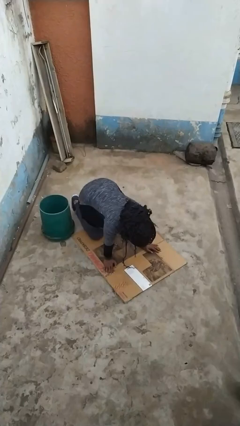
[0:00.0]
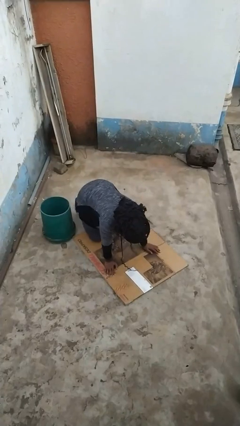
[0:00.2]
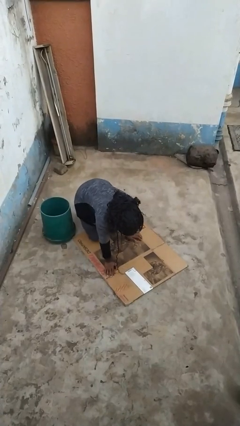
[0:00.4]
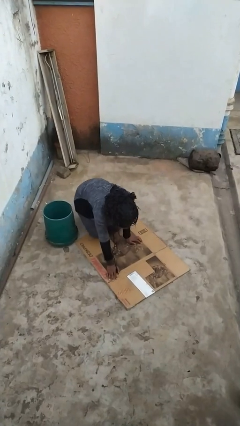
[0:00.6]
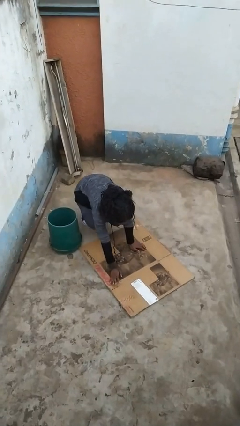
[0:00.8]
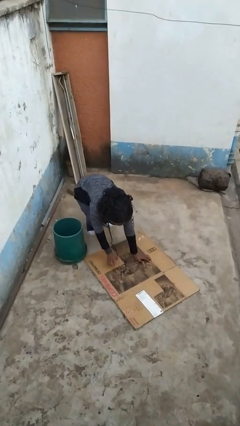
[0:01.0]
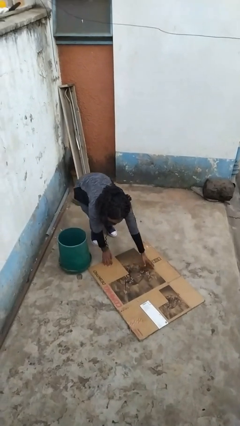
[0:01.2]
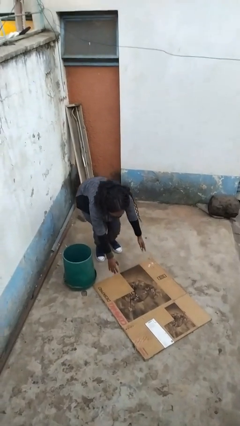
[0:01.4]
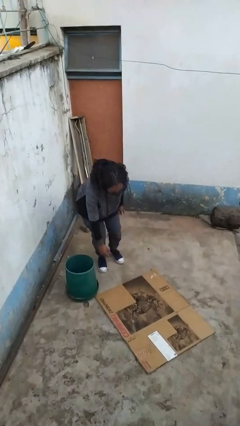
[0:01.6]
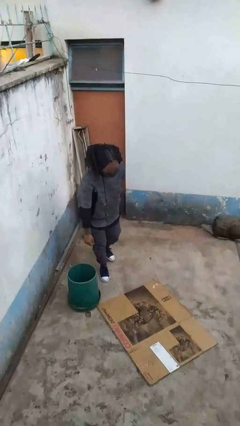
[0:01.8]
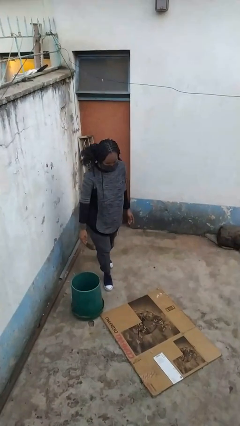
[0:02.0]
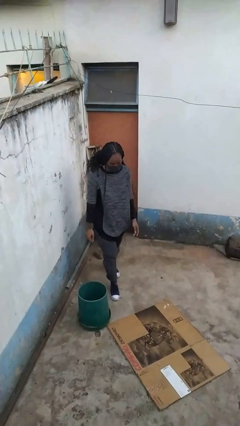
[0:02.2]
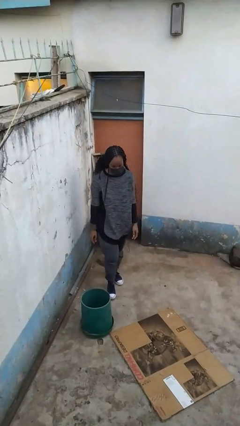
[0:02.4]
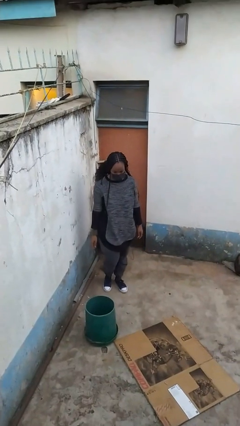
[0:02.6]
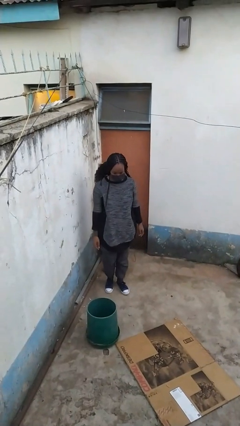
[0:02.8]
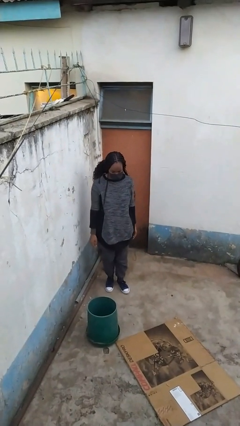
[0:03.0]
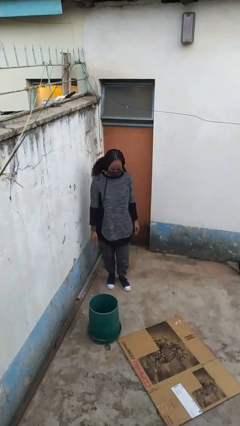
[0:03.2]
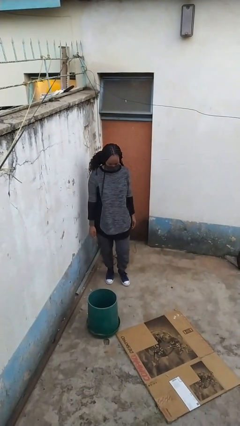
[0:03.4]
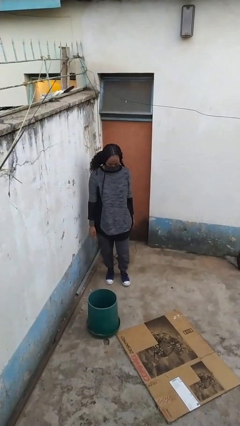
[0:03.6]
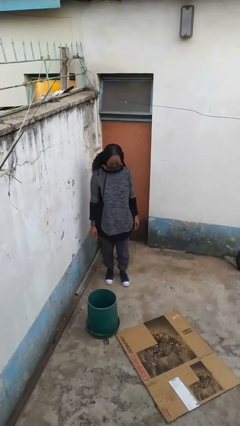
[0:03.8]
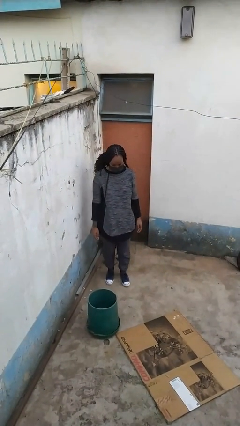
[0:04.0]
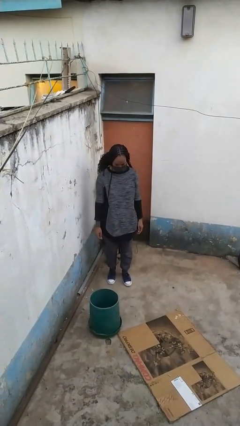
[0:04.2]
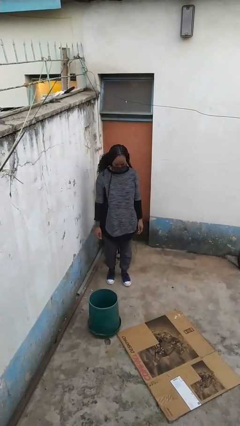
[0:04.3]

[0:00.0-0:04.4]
person stands up from floor

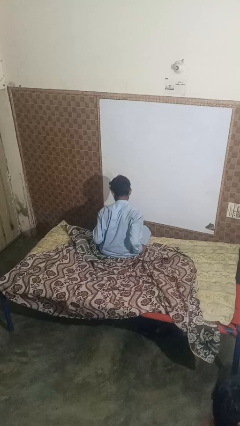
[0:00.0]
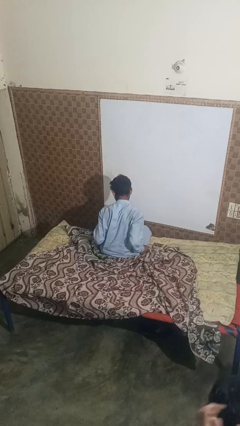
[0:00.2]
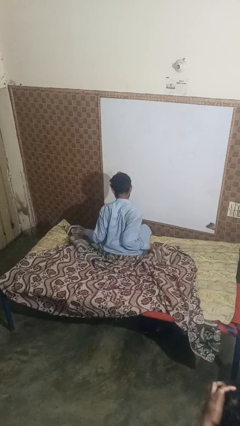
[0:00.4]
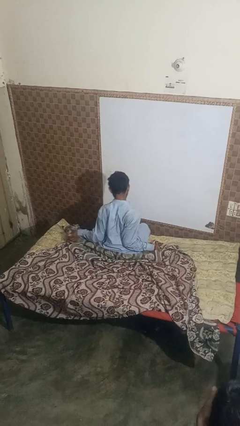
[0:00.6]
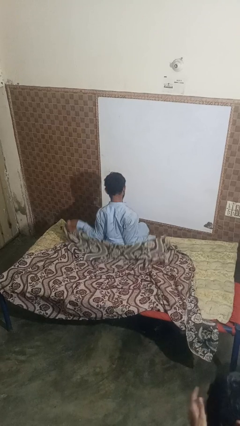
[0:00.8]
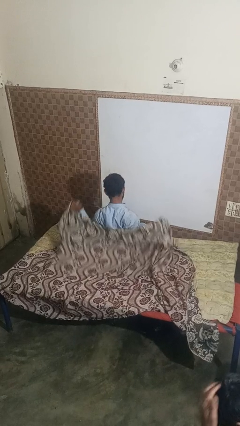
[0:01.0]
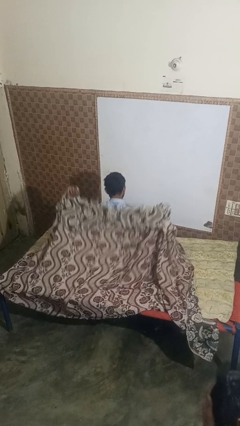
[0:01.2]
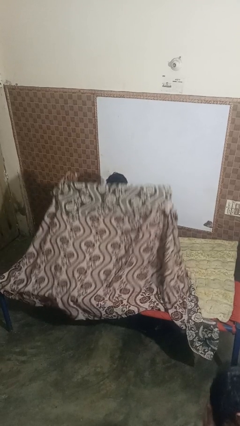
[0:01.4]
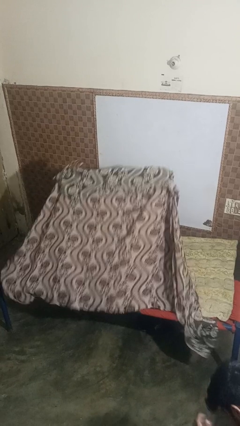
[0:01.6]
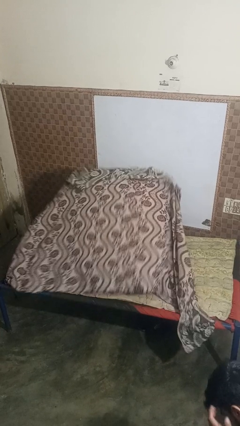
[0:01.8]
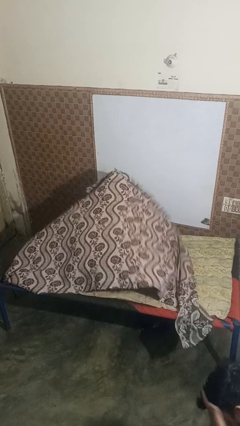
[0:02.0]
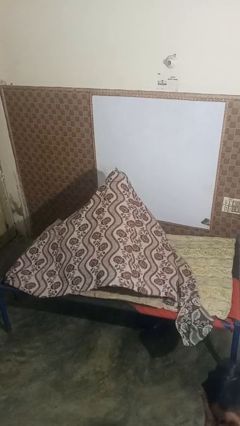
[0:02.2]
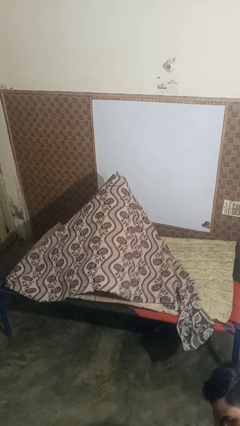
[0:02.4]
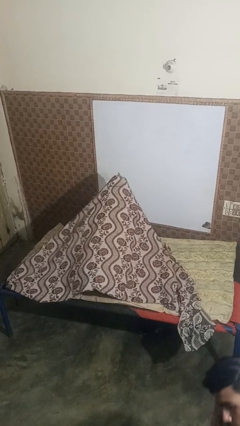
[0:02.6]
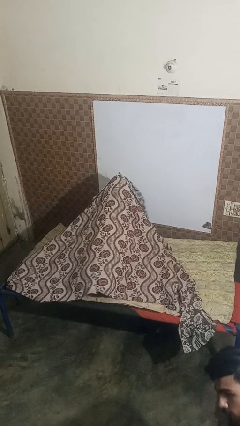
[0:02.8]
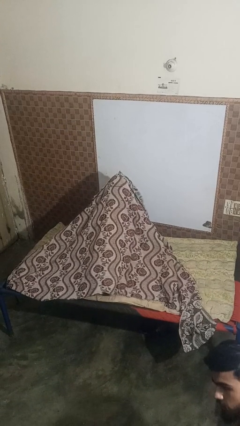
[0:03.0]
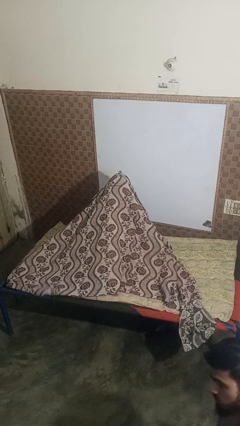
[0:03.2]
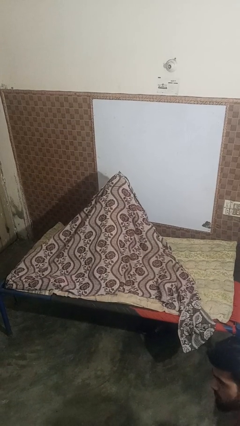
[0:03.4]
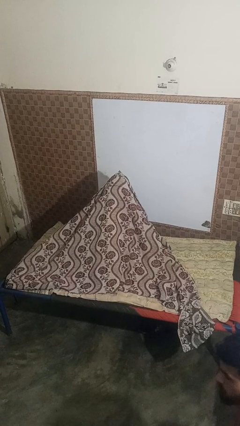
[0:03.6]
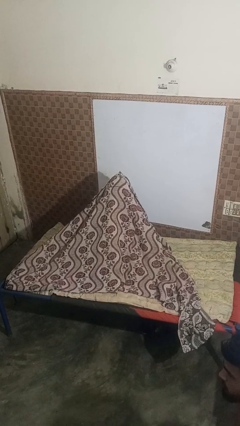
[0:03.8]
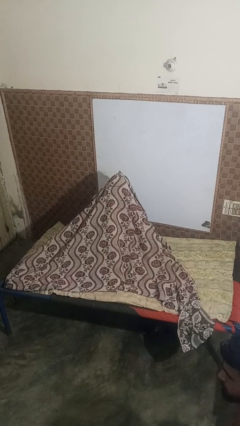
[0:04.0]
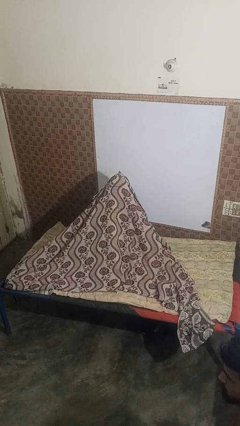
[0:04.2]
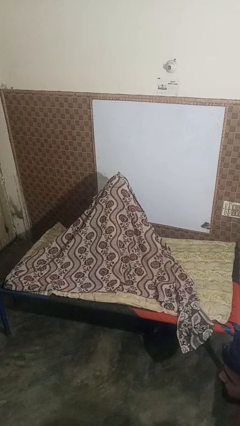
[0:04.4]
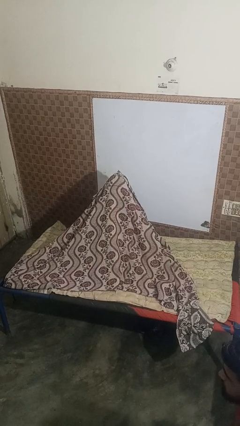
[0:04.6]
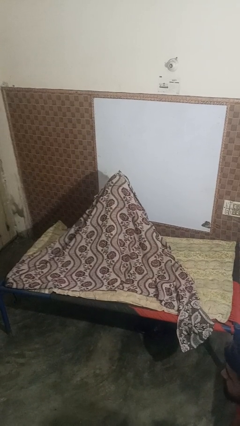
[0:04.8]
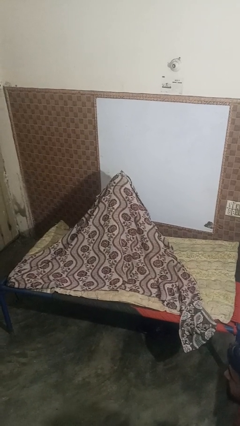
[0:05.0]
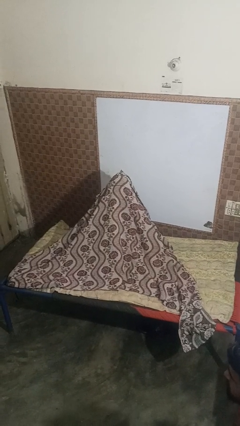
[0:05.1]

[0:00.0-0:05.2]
person covers with blanket

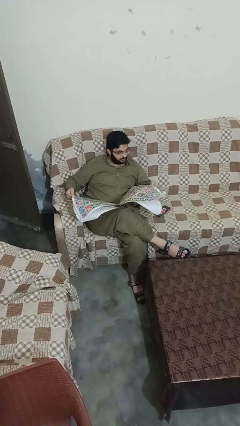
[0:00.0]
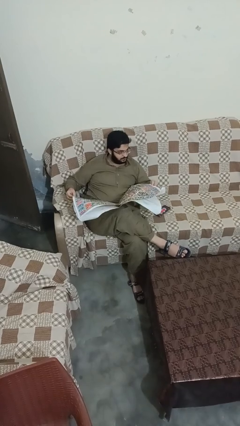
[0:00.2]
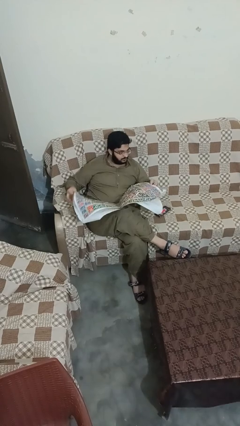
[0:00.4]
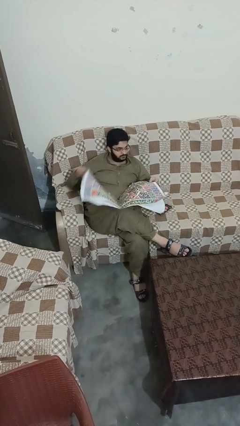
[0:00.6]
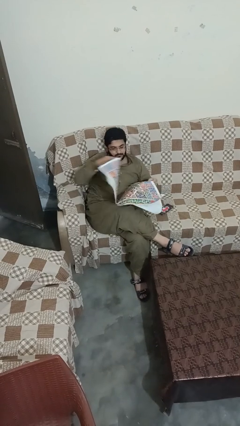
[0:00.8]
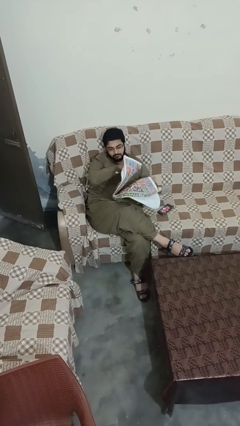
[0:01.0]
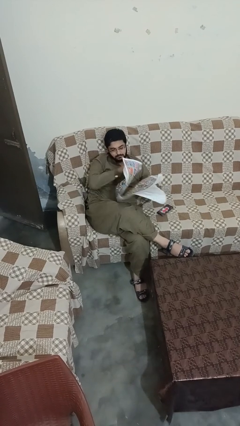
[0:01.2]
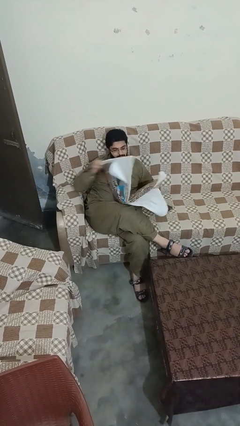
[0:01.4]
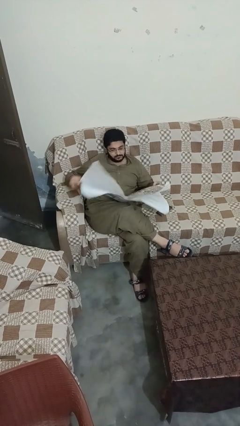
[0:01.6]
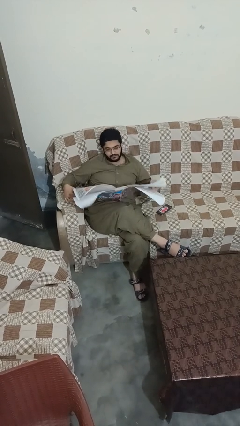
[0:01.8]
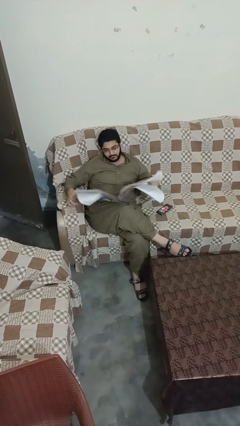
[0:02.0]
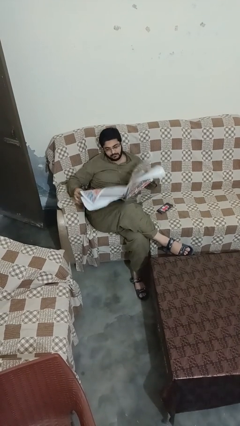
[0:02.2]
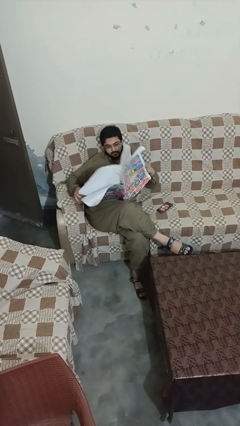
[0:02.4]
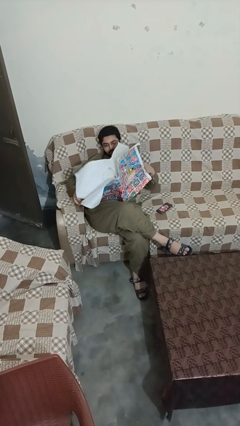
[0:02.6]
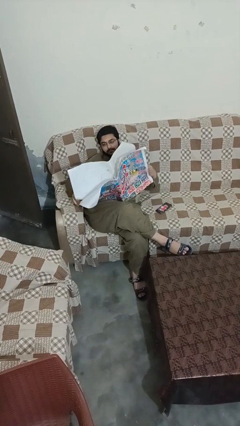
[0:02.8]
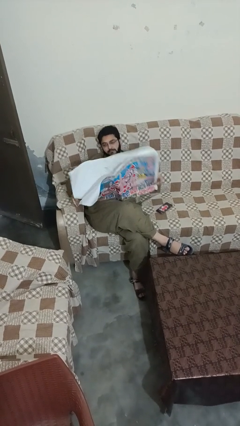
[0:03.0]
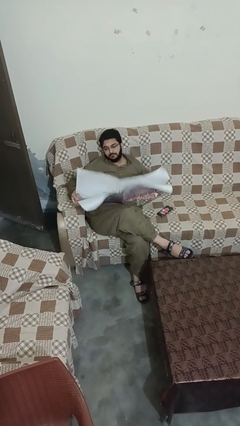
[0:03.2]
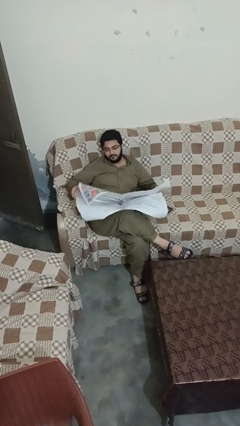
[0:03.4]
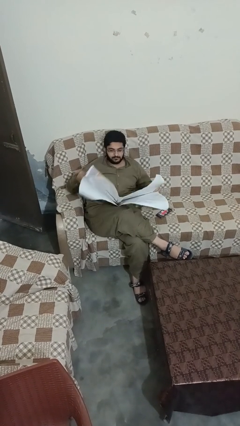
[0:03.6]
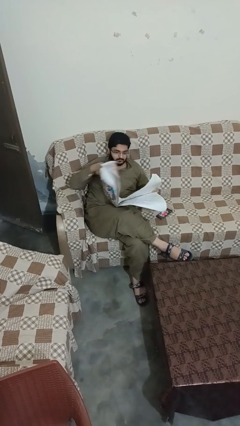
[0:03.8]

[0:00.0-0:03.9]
person reads newspaper

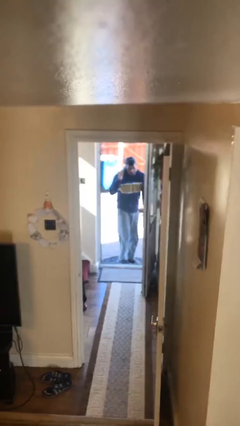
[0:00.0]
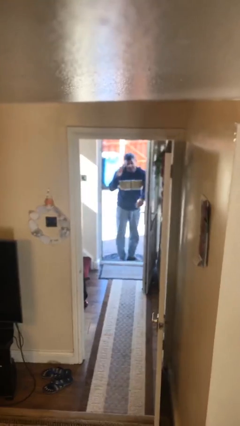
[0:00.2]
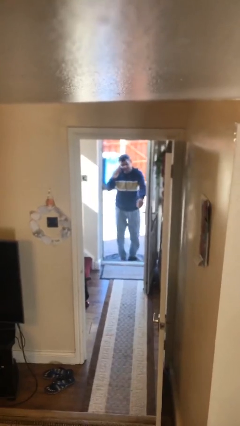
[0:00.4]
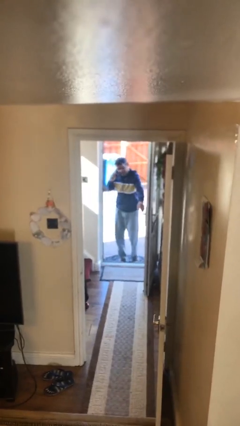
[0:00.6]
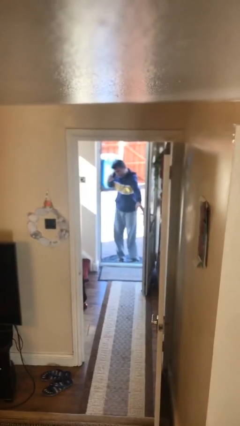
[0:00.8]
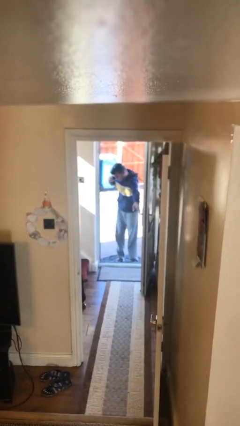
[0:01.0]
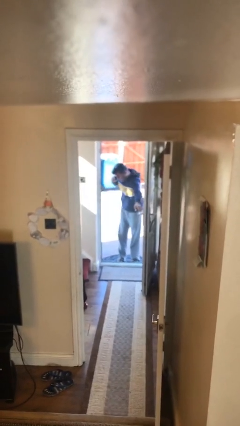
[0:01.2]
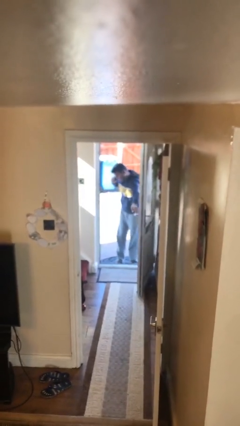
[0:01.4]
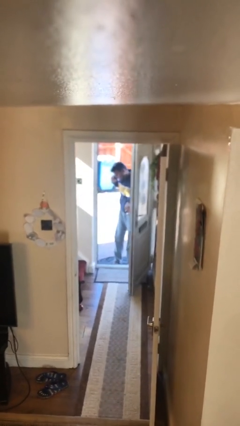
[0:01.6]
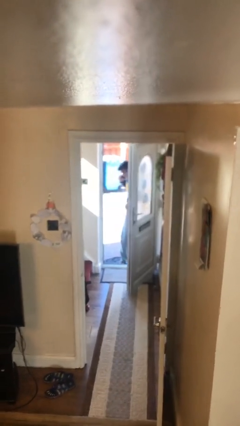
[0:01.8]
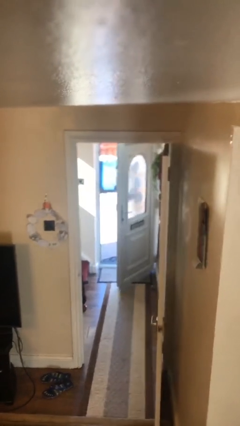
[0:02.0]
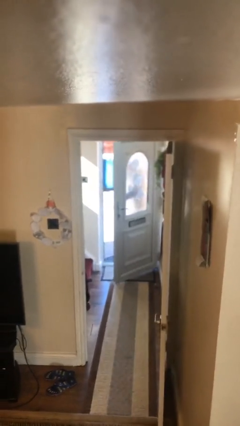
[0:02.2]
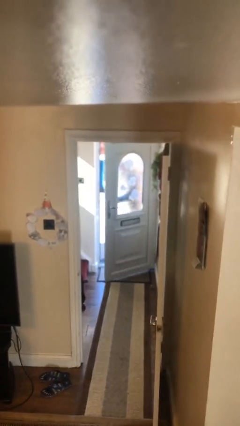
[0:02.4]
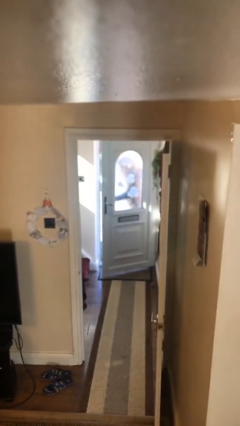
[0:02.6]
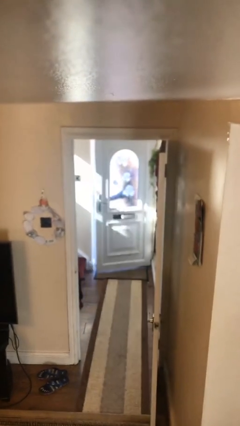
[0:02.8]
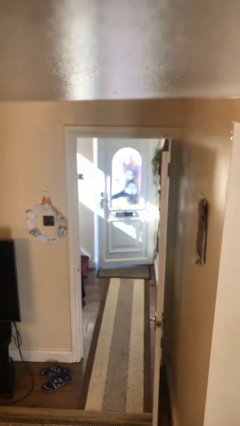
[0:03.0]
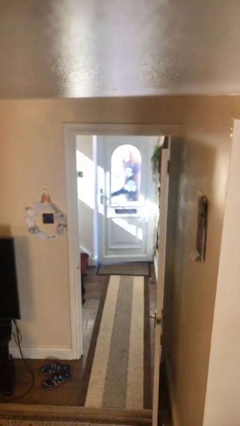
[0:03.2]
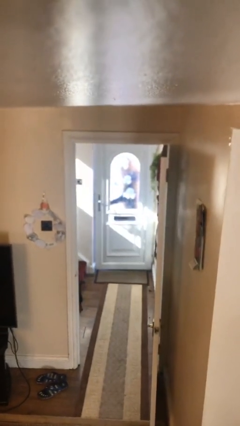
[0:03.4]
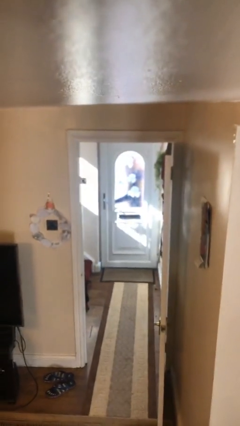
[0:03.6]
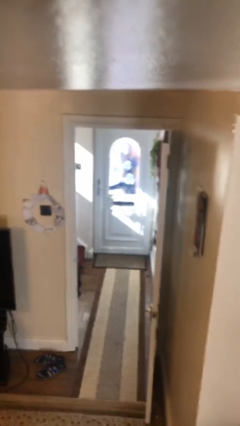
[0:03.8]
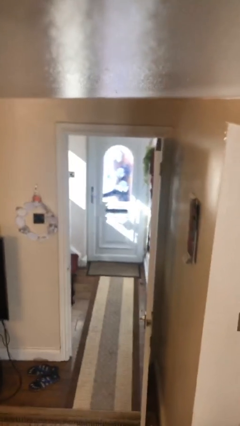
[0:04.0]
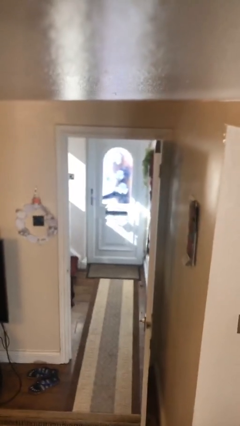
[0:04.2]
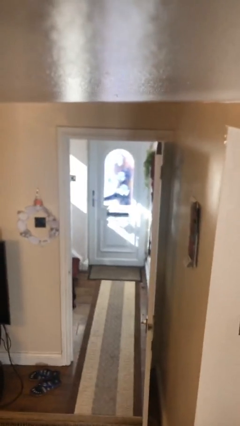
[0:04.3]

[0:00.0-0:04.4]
person closes facility door
